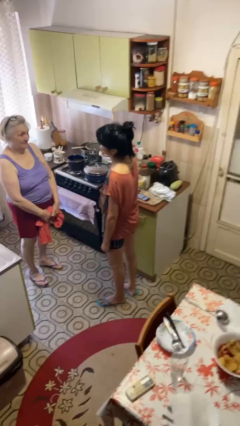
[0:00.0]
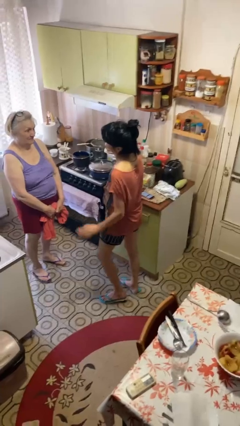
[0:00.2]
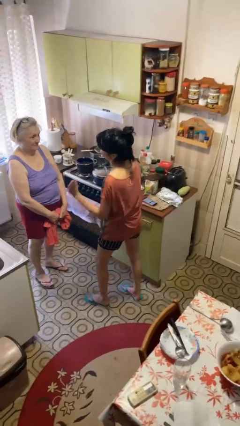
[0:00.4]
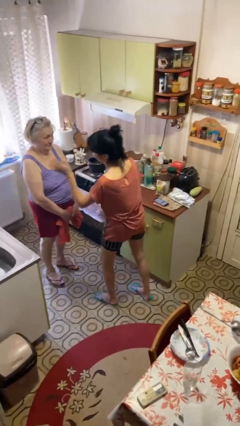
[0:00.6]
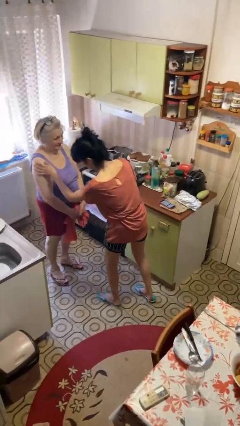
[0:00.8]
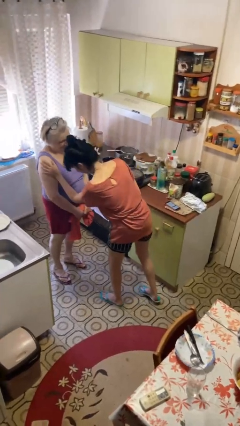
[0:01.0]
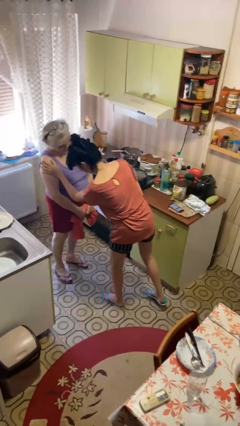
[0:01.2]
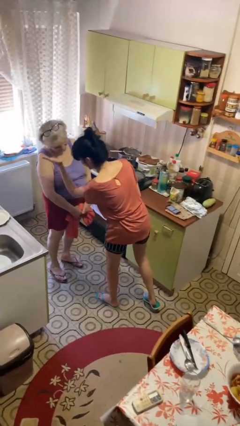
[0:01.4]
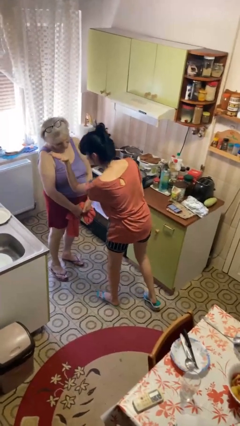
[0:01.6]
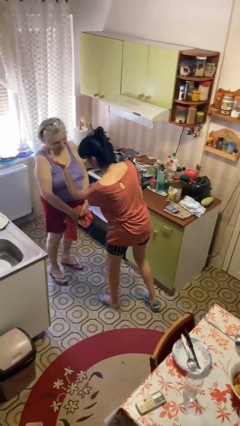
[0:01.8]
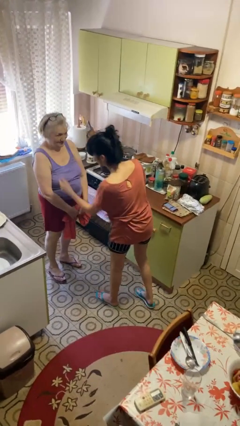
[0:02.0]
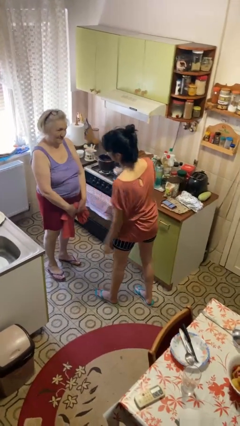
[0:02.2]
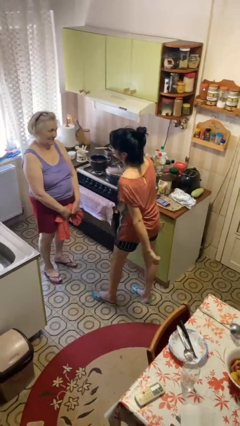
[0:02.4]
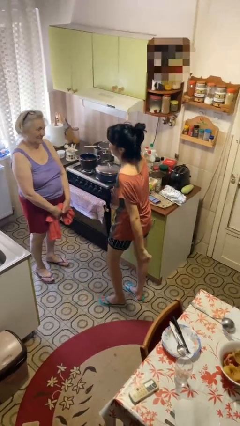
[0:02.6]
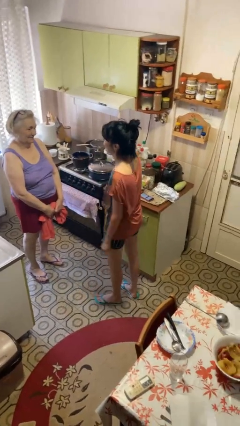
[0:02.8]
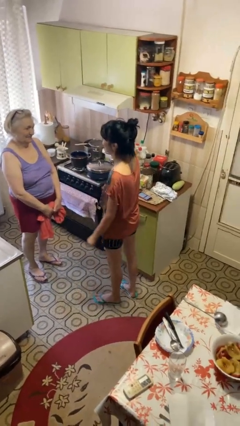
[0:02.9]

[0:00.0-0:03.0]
person shoves person

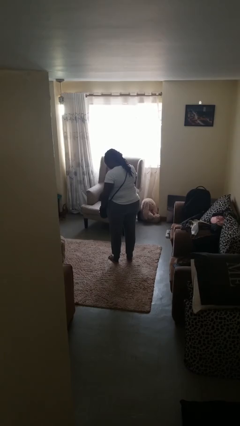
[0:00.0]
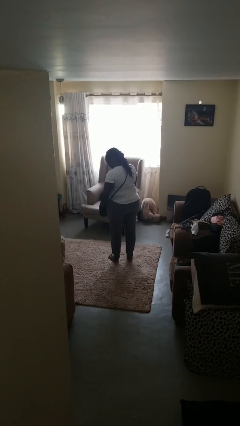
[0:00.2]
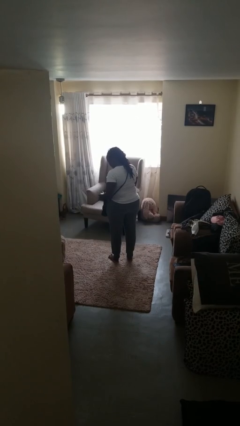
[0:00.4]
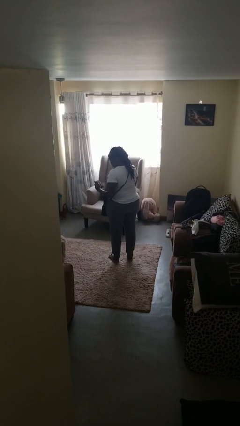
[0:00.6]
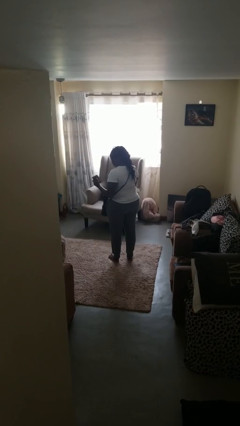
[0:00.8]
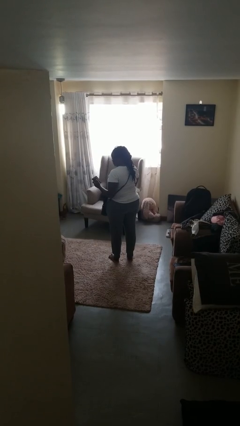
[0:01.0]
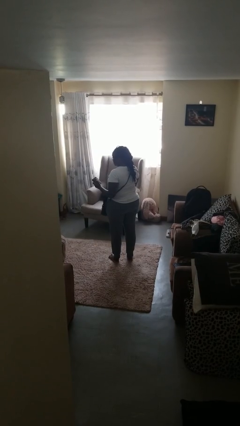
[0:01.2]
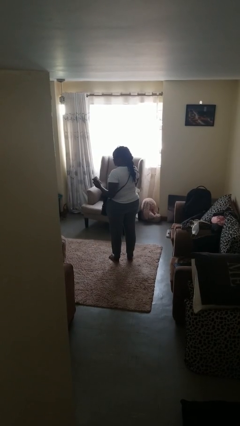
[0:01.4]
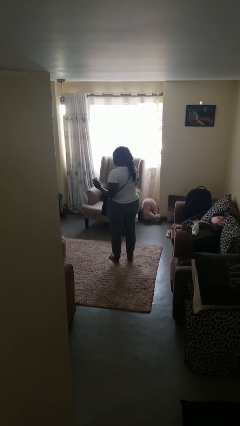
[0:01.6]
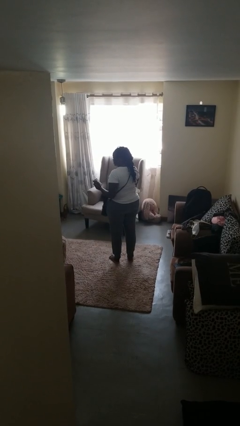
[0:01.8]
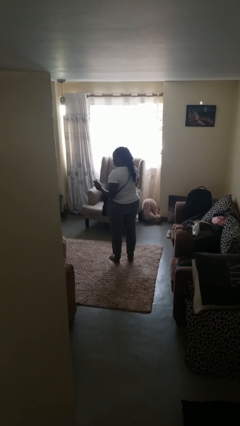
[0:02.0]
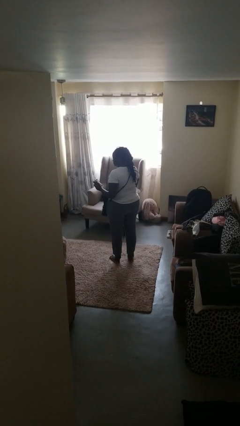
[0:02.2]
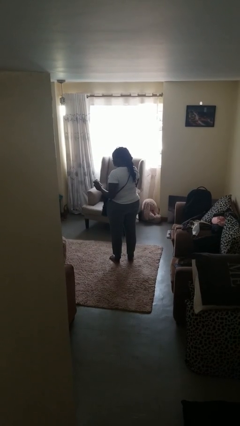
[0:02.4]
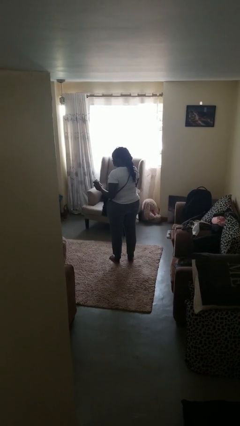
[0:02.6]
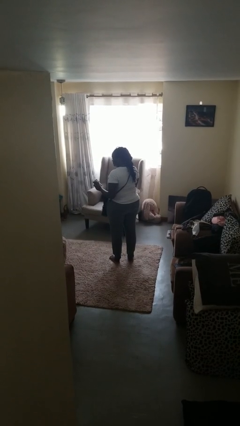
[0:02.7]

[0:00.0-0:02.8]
person takes object from purse

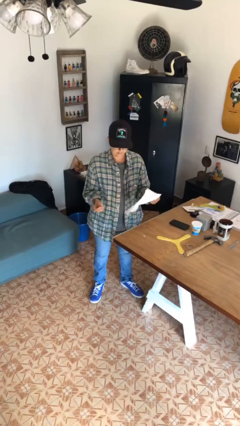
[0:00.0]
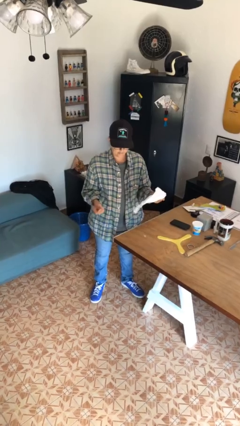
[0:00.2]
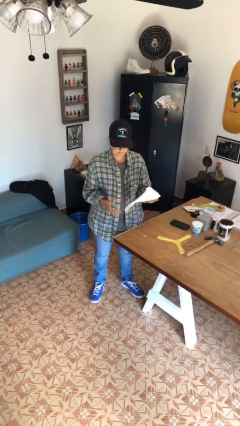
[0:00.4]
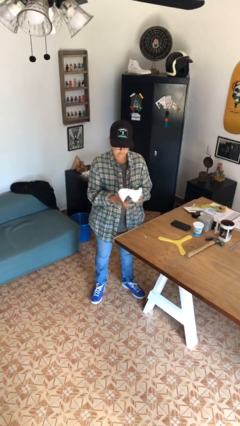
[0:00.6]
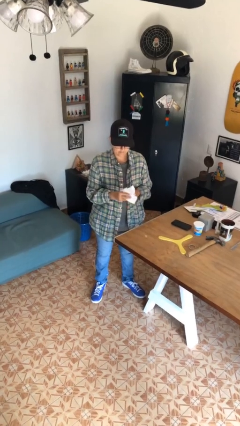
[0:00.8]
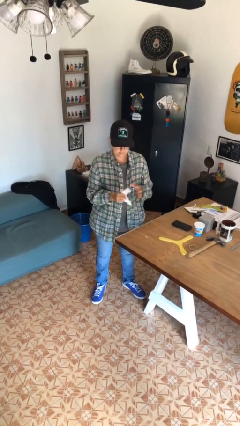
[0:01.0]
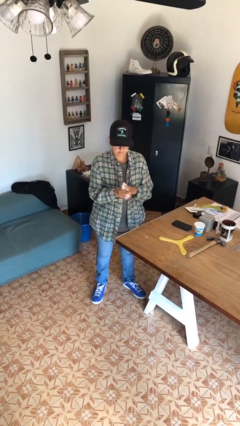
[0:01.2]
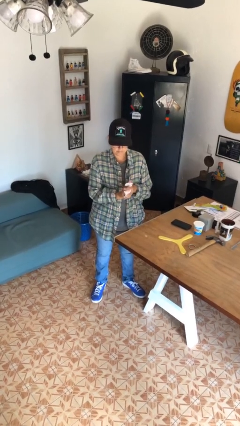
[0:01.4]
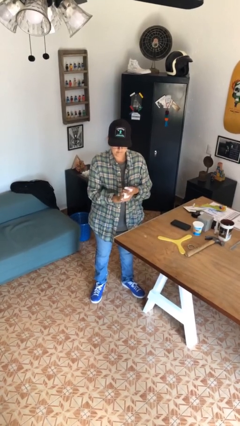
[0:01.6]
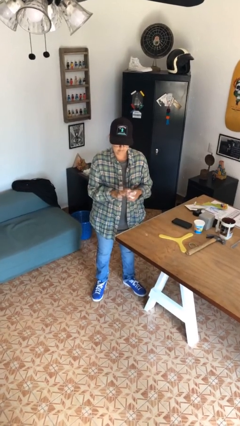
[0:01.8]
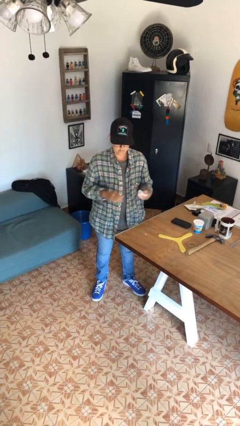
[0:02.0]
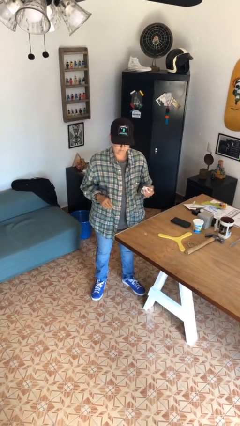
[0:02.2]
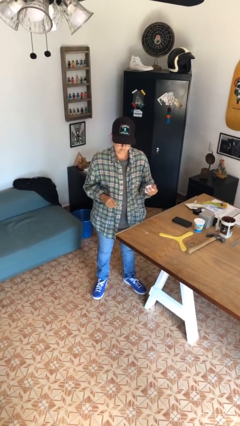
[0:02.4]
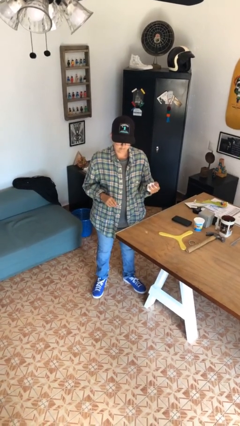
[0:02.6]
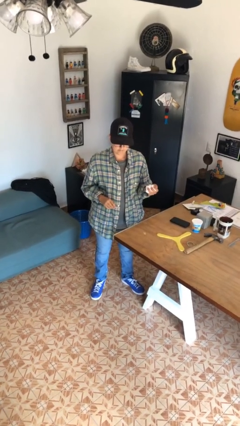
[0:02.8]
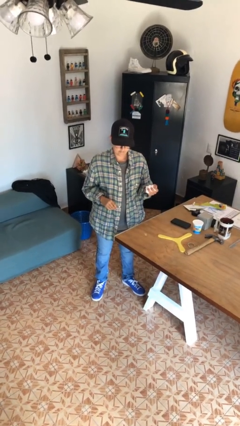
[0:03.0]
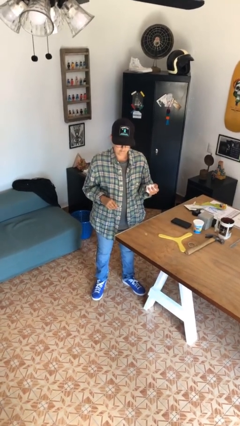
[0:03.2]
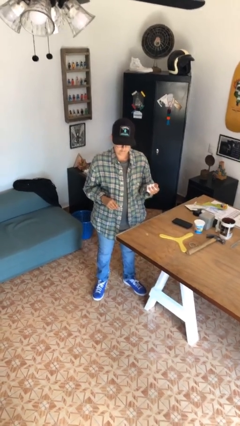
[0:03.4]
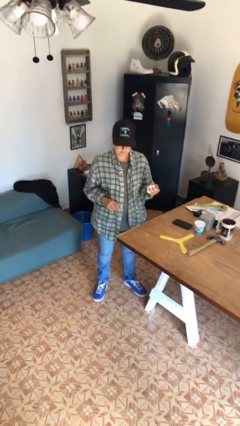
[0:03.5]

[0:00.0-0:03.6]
person crumples paper

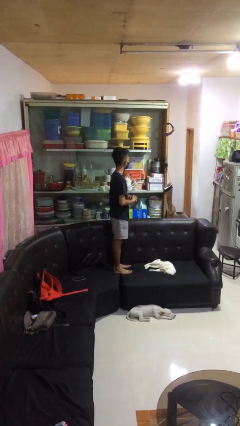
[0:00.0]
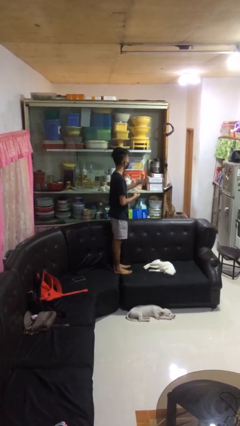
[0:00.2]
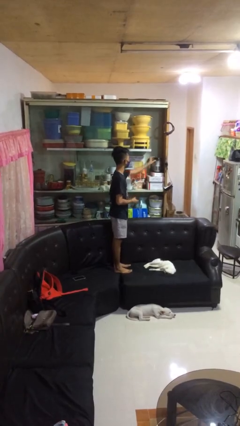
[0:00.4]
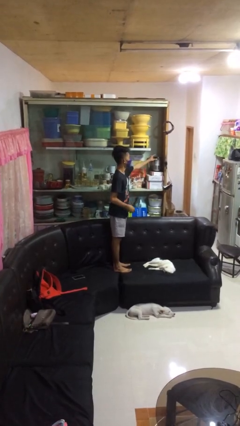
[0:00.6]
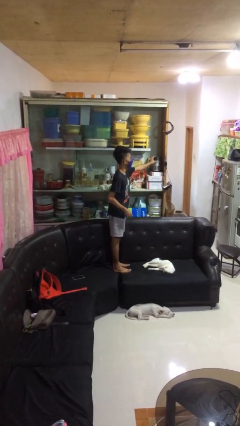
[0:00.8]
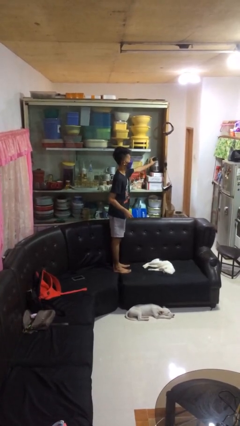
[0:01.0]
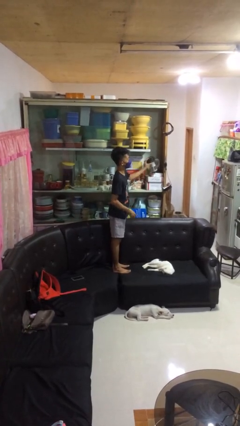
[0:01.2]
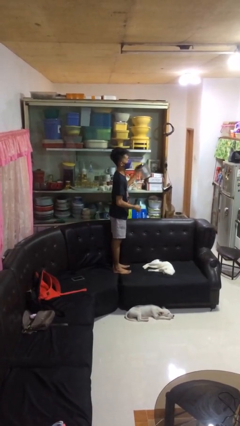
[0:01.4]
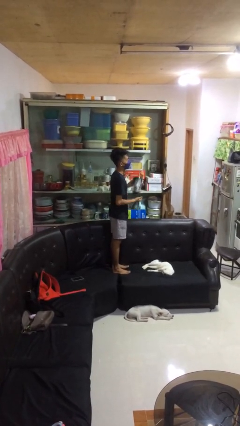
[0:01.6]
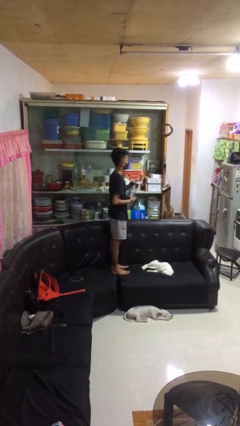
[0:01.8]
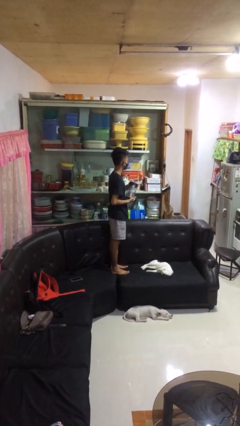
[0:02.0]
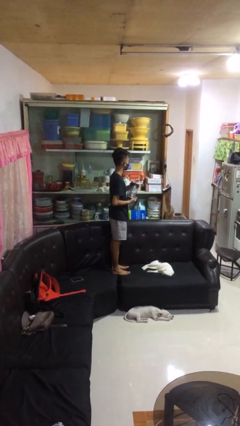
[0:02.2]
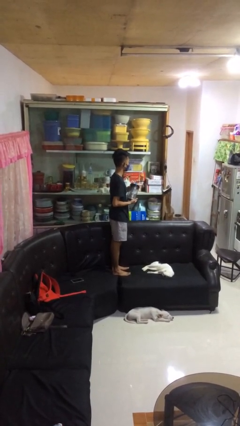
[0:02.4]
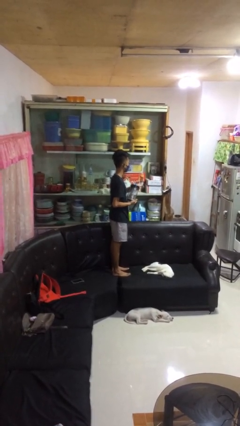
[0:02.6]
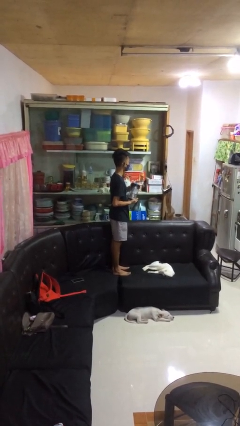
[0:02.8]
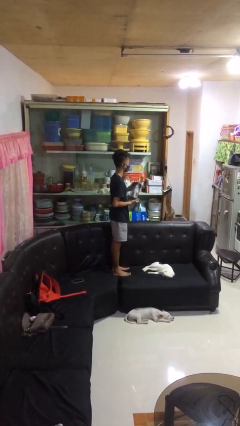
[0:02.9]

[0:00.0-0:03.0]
person picks up object from cabinet

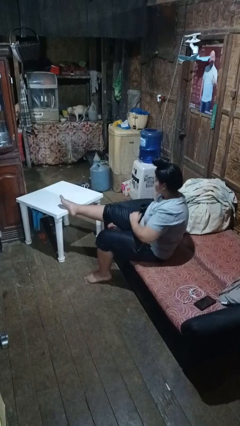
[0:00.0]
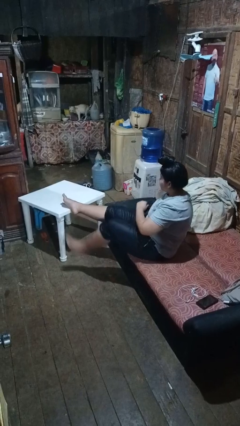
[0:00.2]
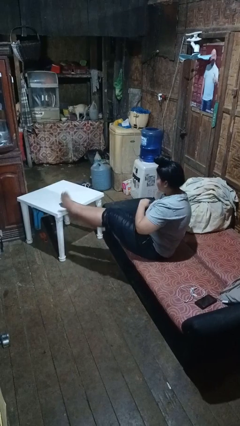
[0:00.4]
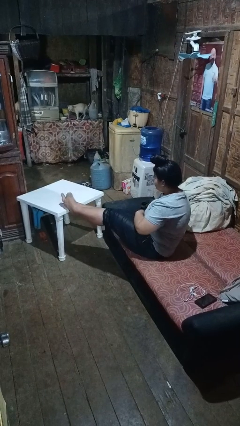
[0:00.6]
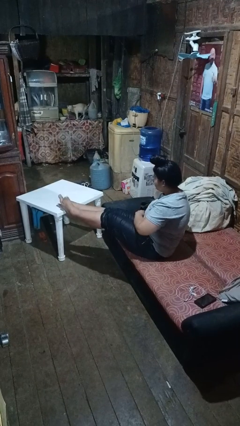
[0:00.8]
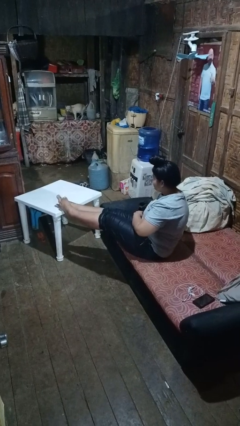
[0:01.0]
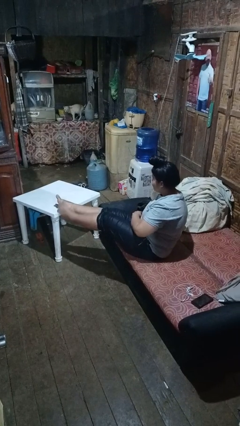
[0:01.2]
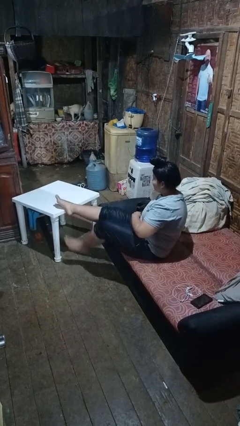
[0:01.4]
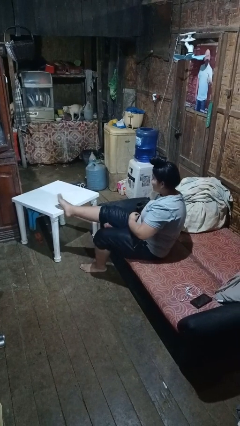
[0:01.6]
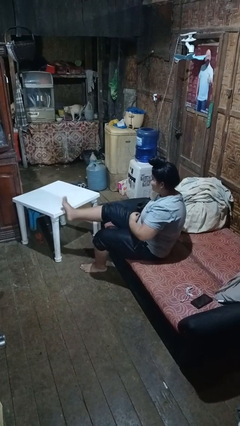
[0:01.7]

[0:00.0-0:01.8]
person puts feet up

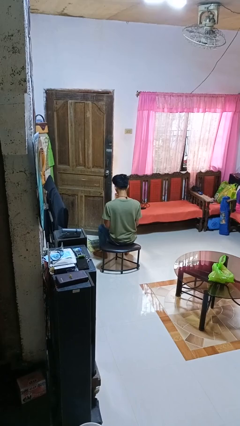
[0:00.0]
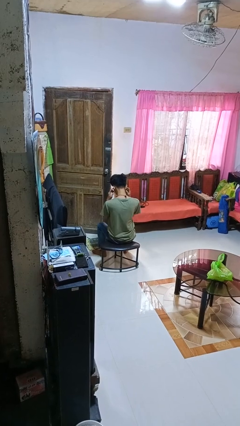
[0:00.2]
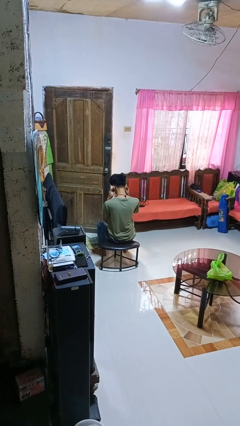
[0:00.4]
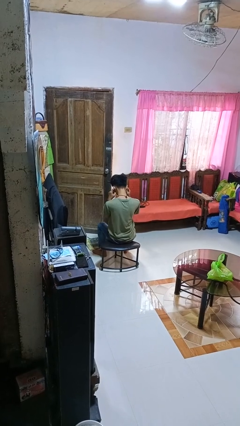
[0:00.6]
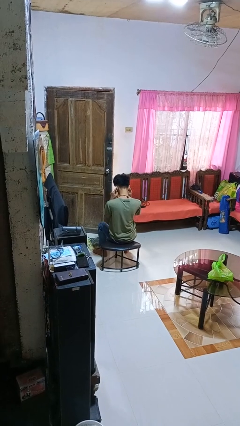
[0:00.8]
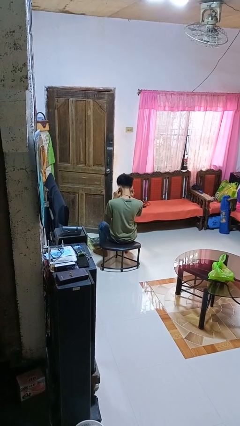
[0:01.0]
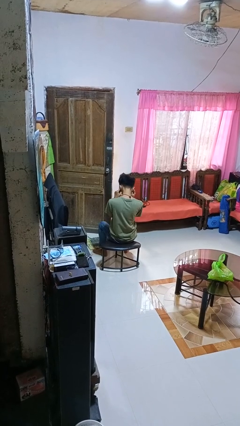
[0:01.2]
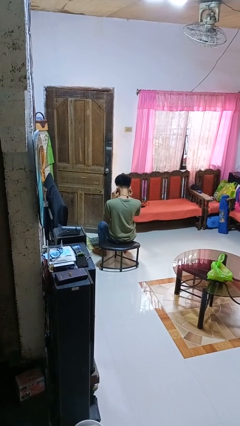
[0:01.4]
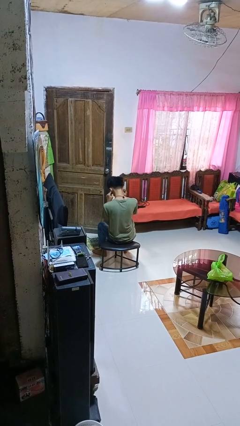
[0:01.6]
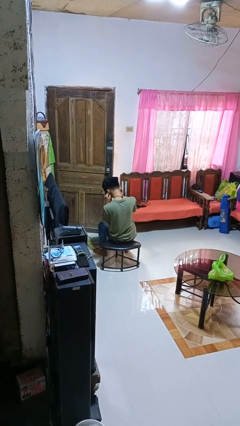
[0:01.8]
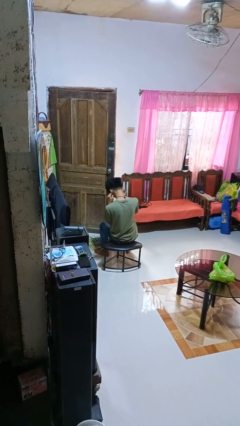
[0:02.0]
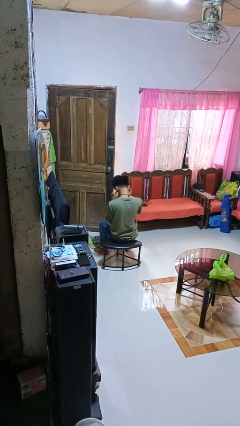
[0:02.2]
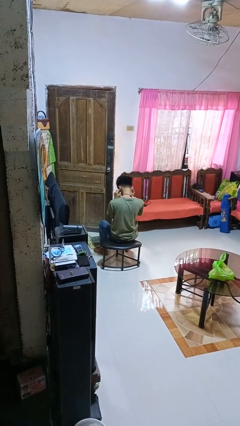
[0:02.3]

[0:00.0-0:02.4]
person puts fingers in ear

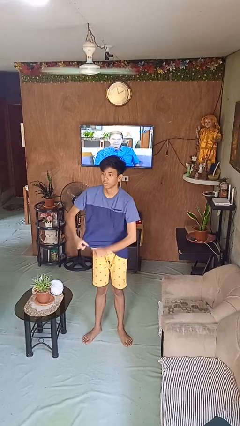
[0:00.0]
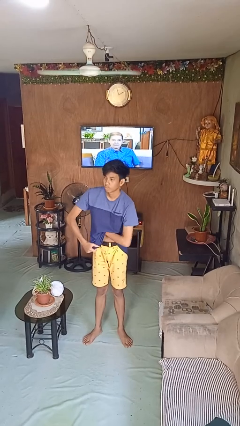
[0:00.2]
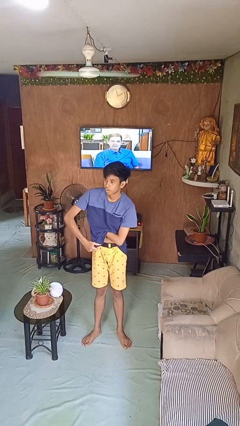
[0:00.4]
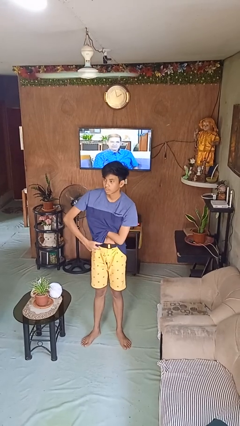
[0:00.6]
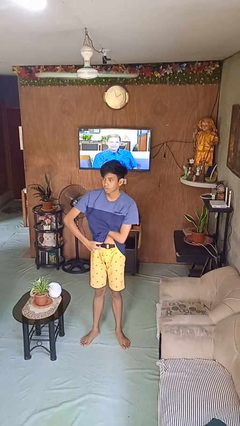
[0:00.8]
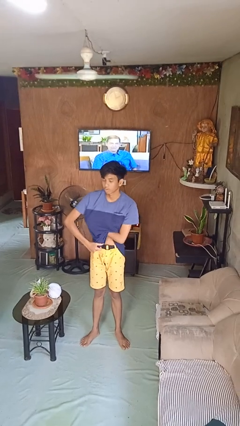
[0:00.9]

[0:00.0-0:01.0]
person applies deodorant

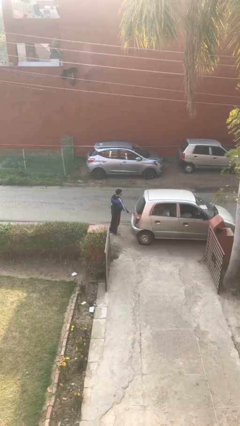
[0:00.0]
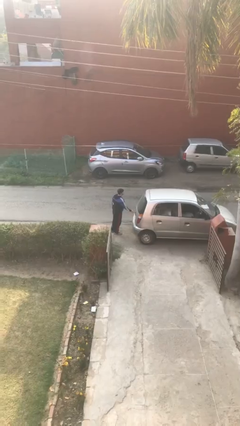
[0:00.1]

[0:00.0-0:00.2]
person opens car trunk
